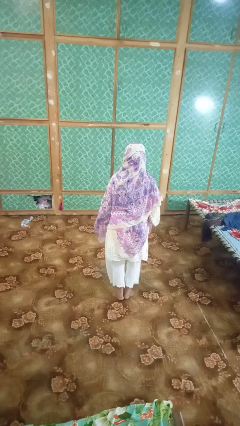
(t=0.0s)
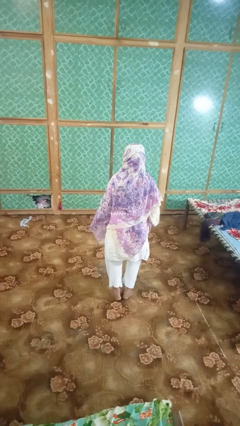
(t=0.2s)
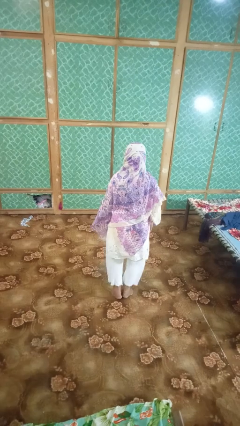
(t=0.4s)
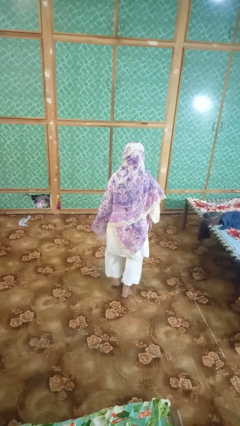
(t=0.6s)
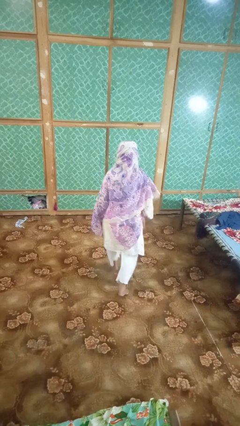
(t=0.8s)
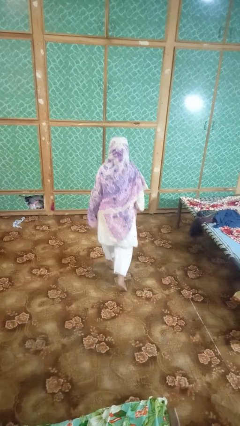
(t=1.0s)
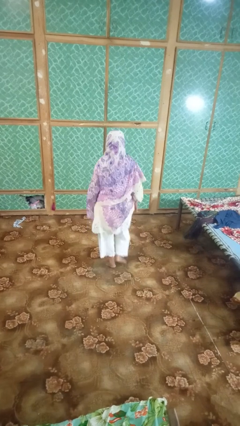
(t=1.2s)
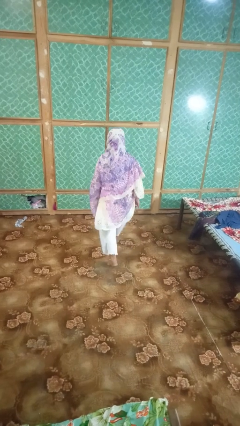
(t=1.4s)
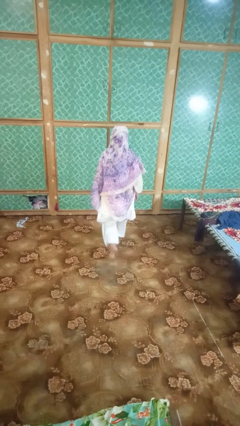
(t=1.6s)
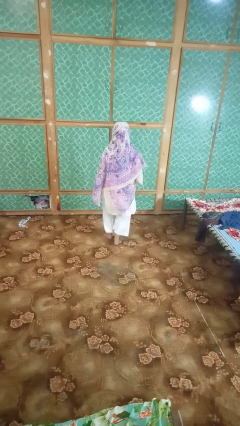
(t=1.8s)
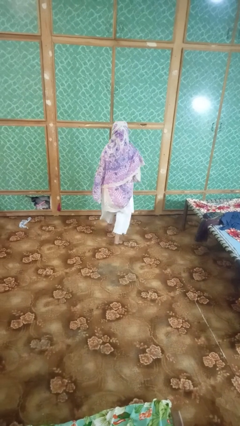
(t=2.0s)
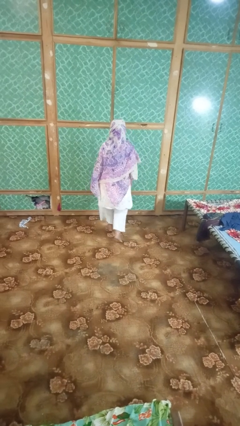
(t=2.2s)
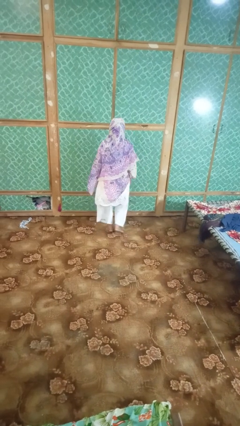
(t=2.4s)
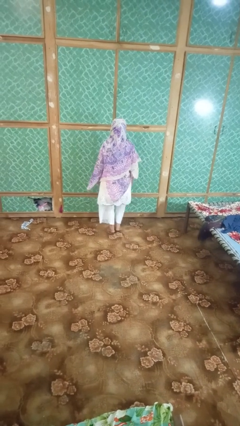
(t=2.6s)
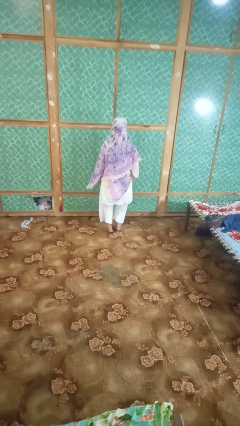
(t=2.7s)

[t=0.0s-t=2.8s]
person walks tiptoe

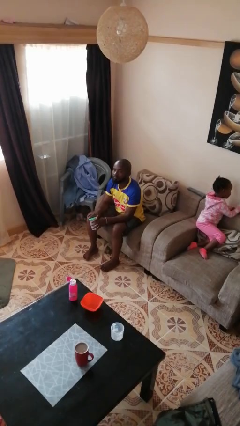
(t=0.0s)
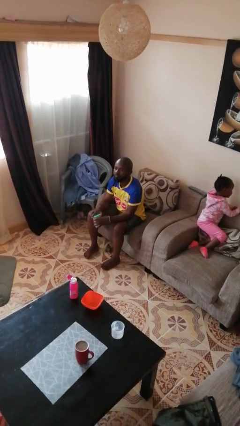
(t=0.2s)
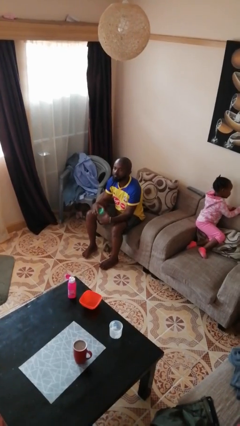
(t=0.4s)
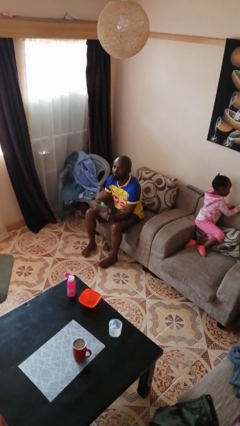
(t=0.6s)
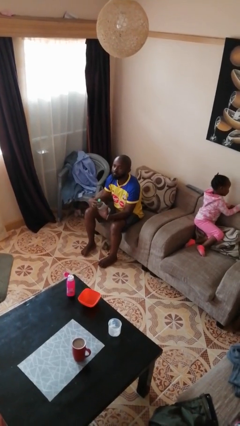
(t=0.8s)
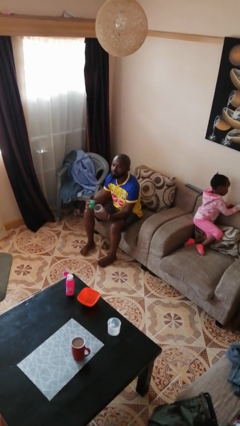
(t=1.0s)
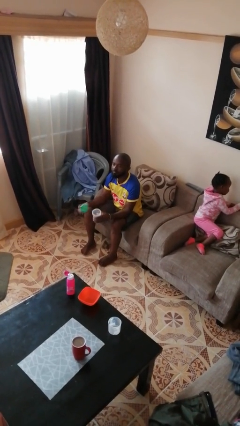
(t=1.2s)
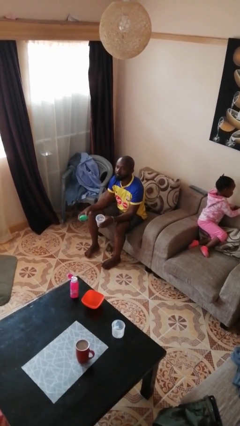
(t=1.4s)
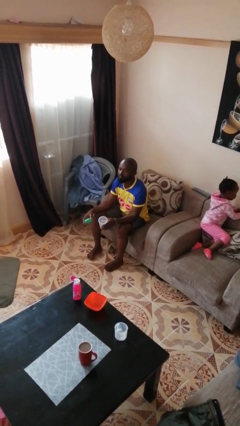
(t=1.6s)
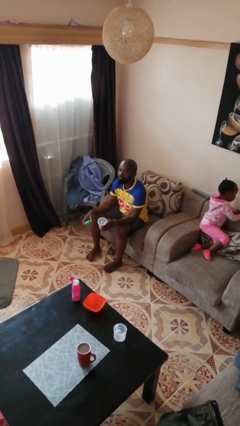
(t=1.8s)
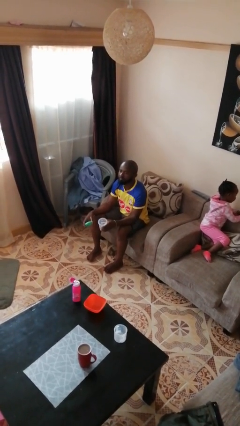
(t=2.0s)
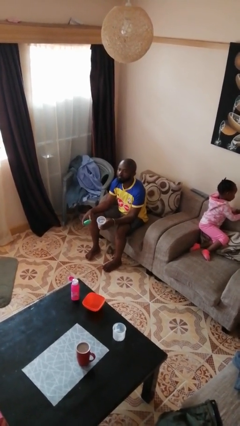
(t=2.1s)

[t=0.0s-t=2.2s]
person opens jar

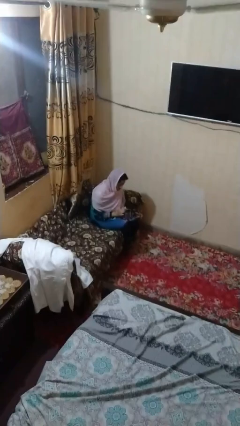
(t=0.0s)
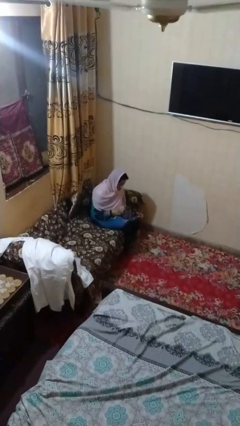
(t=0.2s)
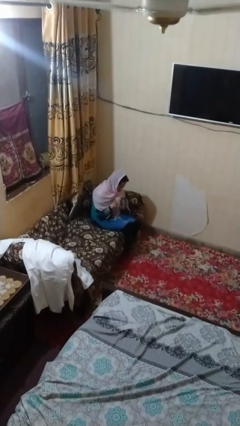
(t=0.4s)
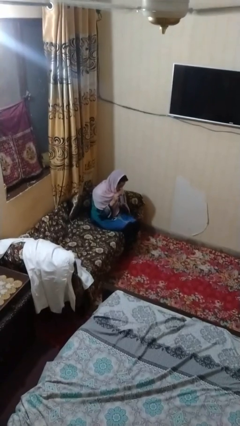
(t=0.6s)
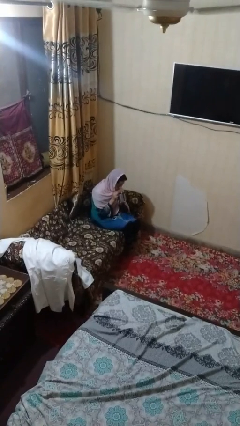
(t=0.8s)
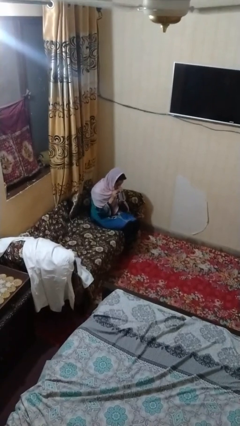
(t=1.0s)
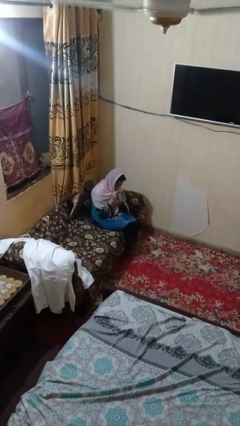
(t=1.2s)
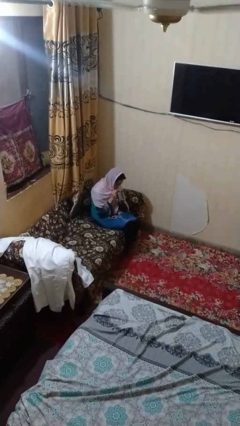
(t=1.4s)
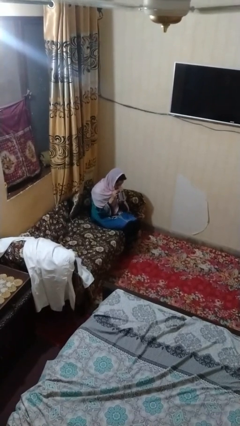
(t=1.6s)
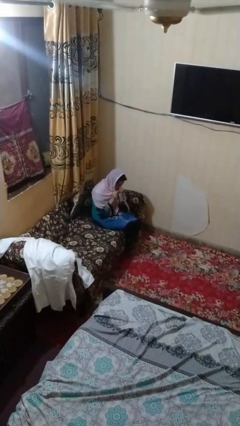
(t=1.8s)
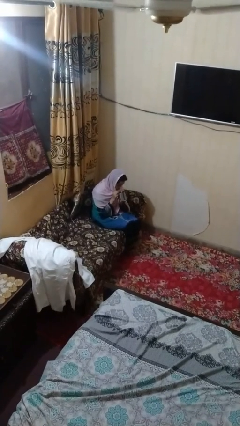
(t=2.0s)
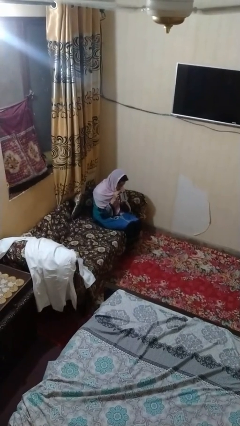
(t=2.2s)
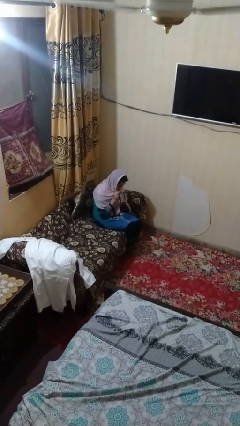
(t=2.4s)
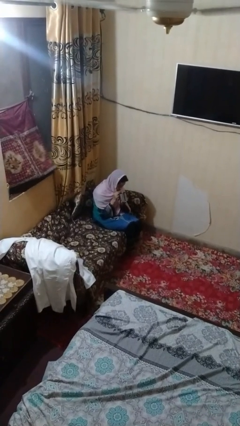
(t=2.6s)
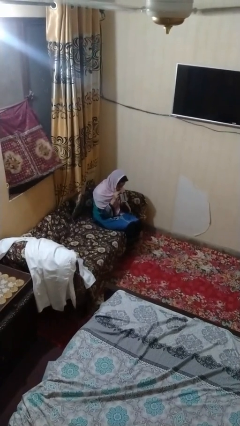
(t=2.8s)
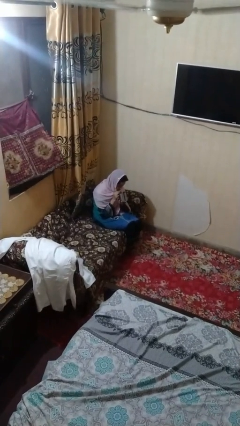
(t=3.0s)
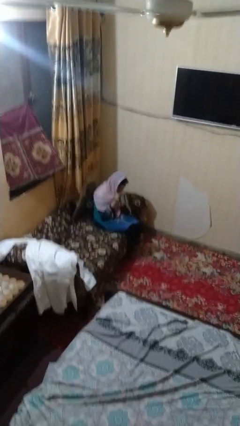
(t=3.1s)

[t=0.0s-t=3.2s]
person drinks from straw

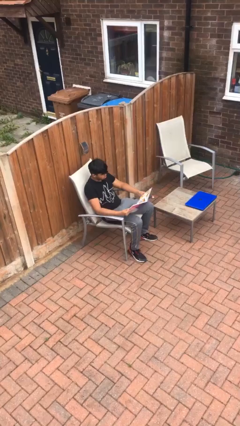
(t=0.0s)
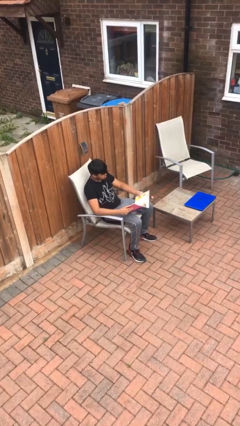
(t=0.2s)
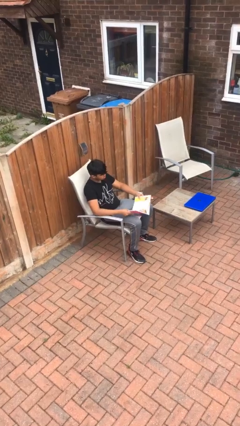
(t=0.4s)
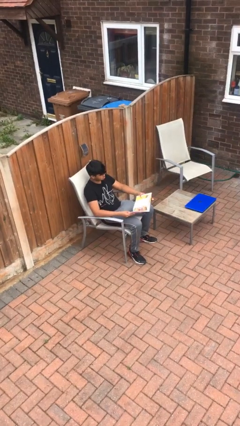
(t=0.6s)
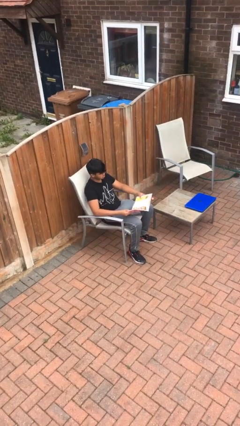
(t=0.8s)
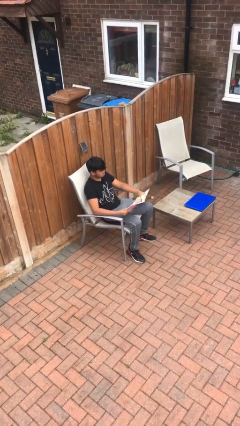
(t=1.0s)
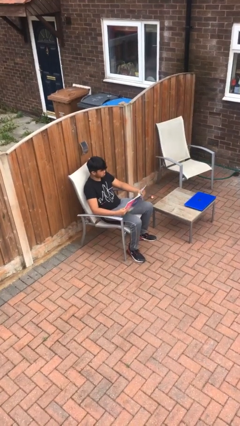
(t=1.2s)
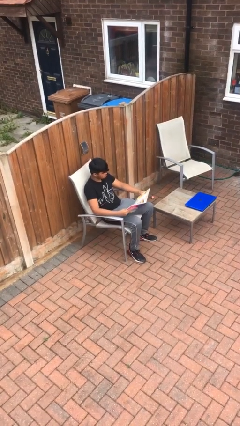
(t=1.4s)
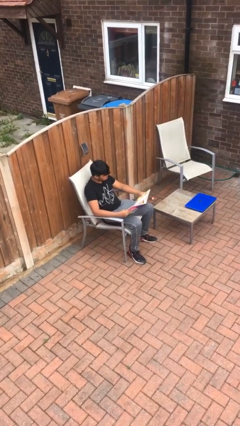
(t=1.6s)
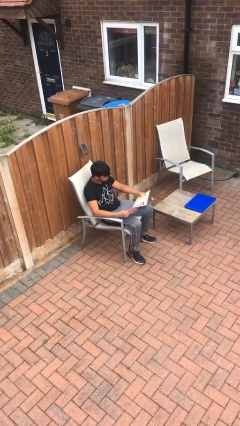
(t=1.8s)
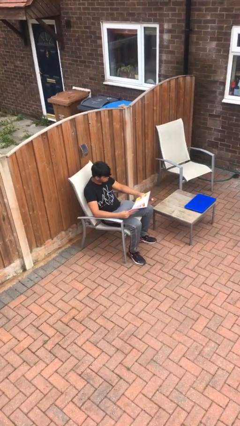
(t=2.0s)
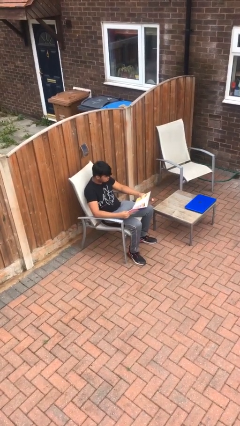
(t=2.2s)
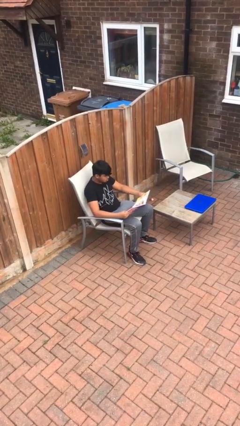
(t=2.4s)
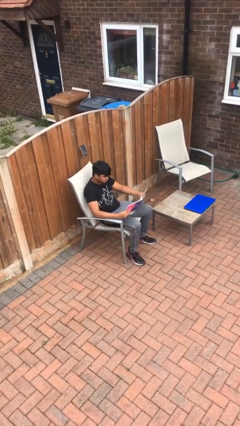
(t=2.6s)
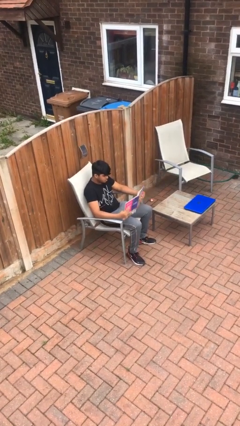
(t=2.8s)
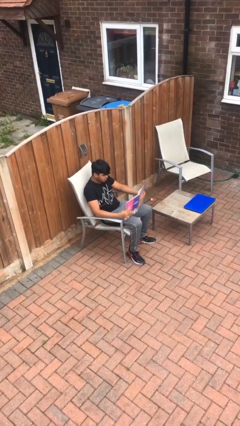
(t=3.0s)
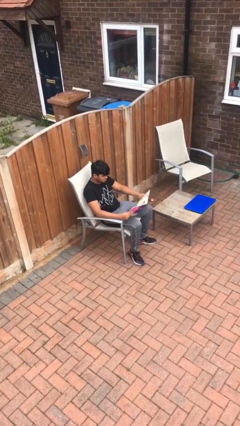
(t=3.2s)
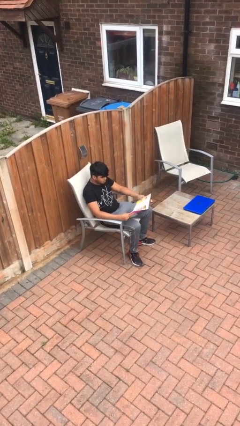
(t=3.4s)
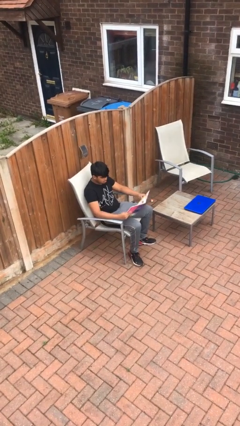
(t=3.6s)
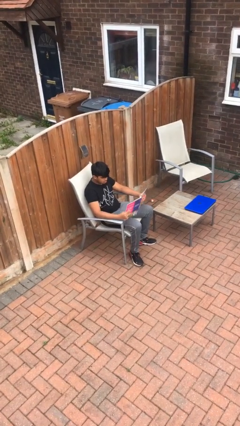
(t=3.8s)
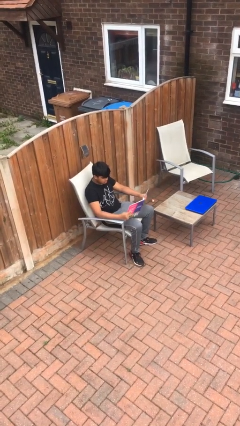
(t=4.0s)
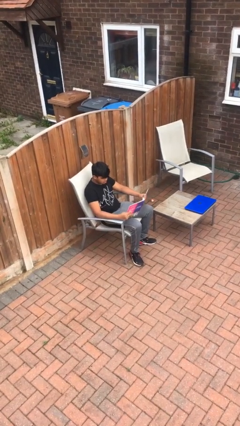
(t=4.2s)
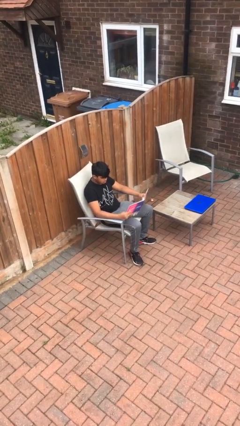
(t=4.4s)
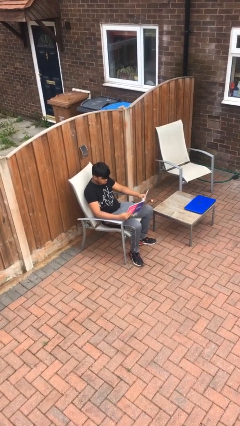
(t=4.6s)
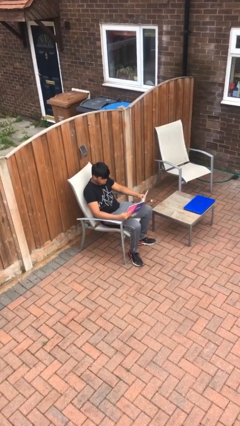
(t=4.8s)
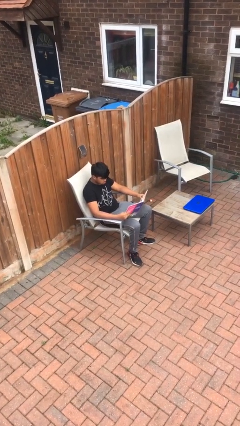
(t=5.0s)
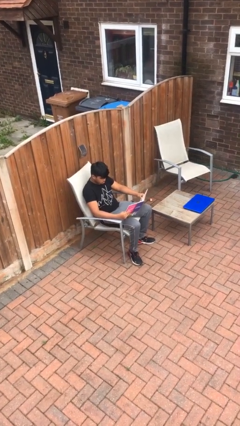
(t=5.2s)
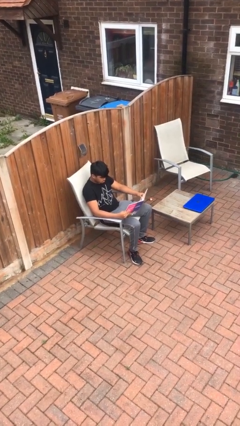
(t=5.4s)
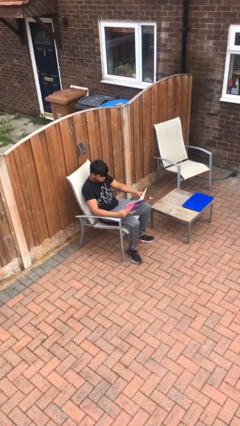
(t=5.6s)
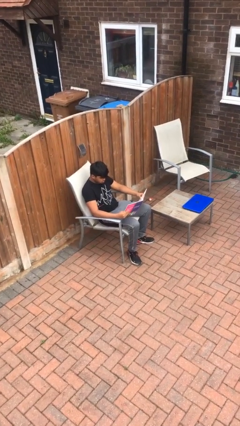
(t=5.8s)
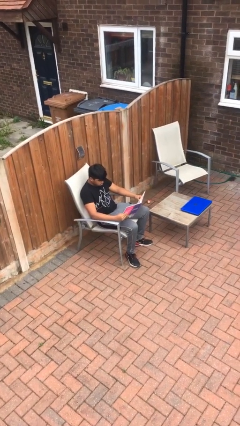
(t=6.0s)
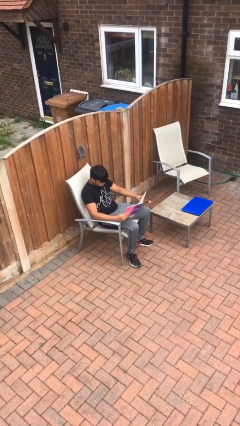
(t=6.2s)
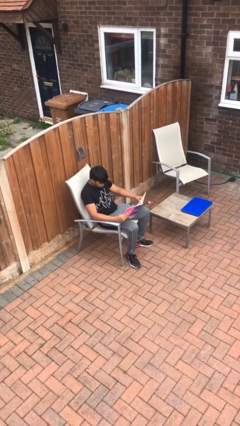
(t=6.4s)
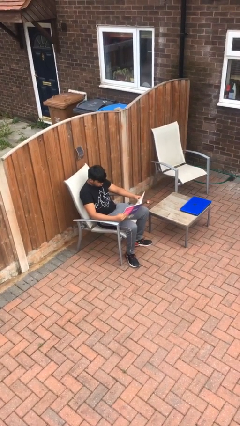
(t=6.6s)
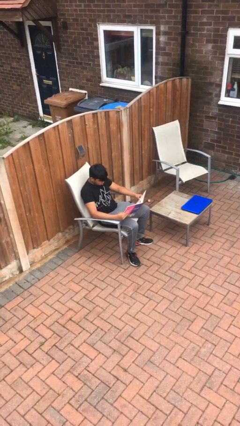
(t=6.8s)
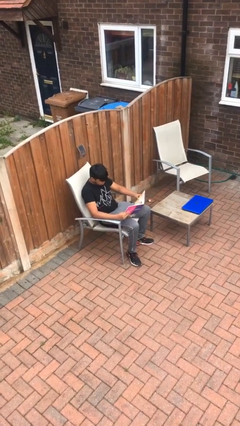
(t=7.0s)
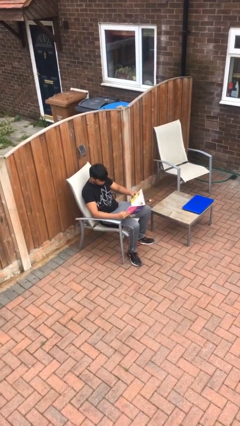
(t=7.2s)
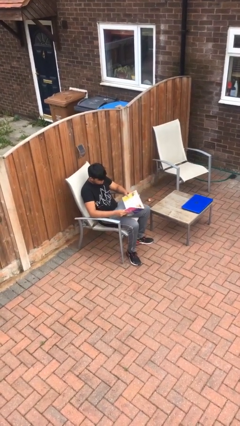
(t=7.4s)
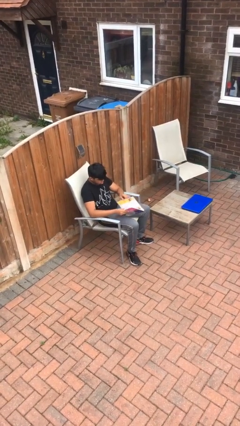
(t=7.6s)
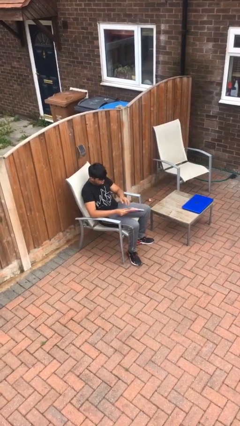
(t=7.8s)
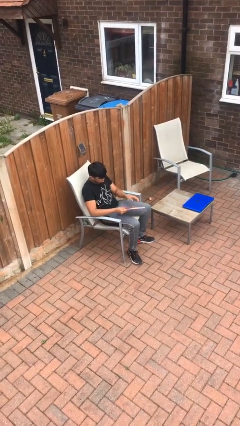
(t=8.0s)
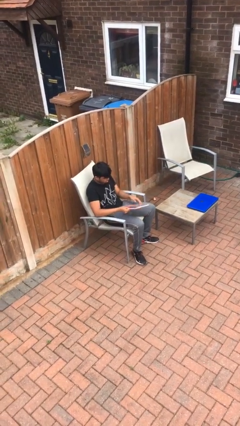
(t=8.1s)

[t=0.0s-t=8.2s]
person reads document

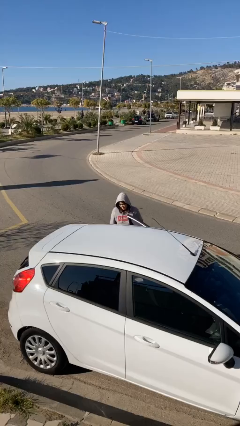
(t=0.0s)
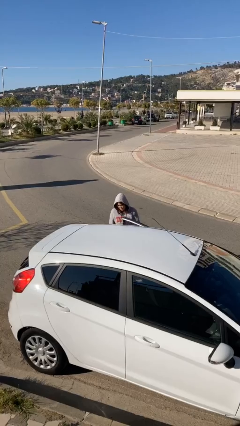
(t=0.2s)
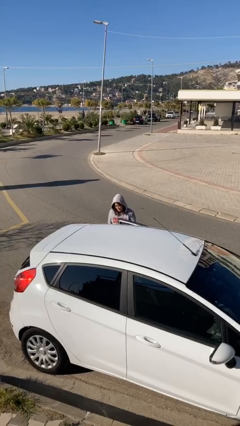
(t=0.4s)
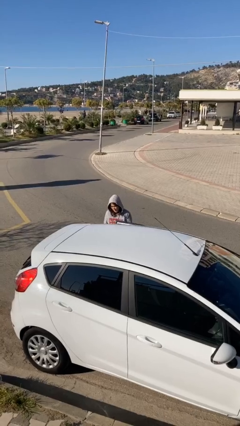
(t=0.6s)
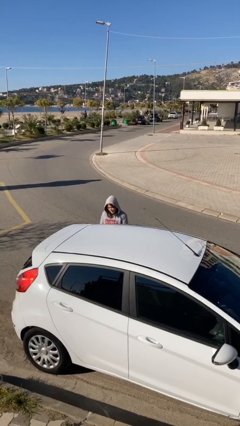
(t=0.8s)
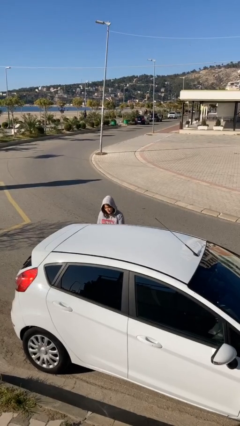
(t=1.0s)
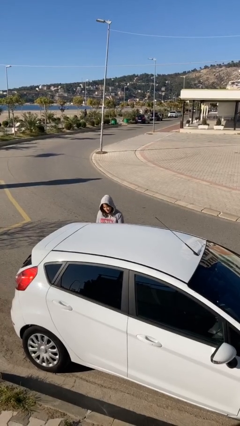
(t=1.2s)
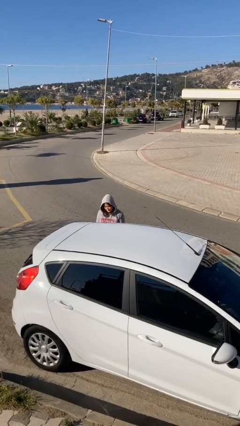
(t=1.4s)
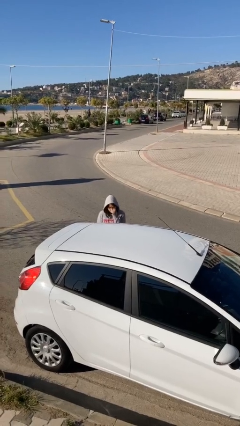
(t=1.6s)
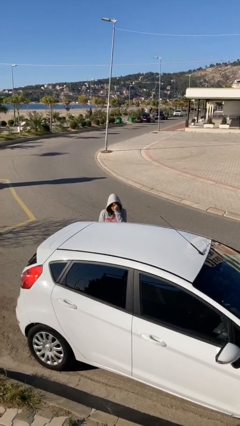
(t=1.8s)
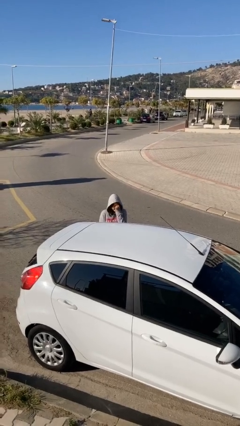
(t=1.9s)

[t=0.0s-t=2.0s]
person closes car door
